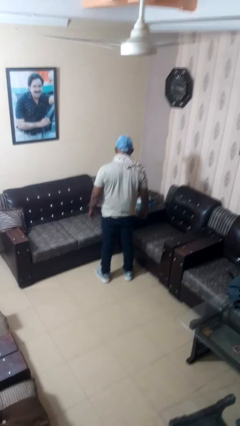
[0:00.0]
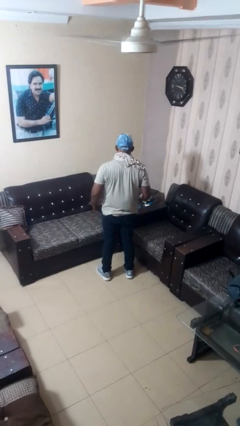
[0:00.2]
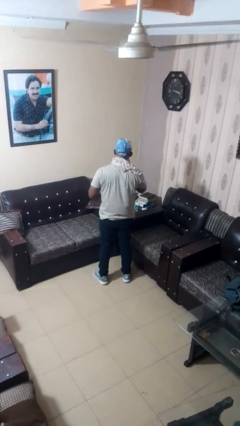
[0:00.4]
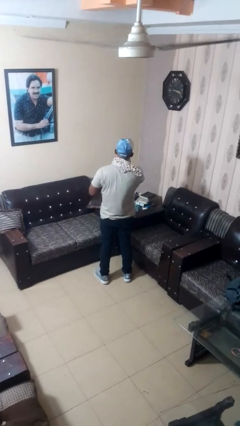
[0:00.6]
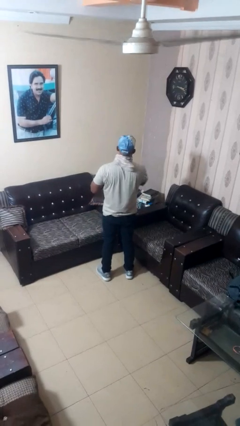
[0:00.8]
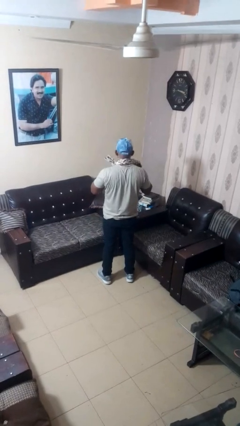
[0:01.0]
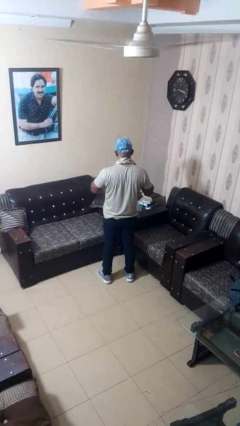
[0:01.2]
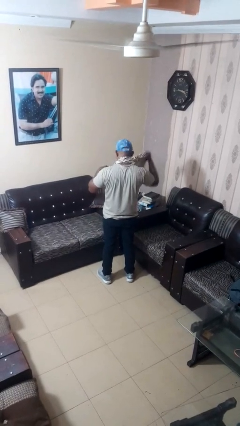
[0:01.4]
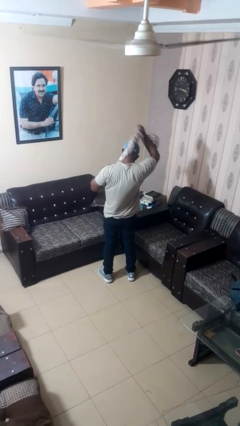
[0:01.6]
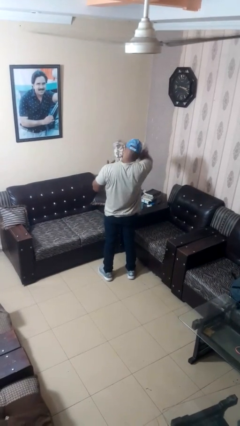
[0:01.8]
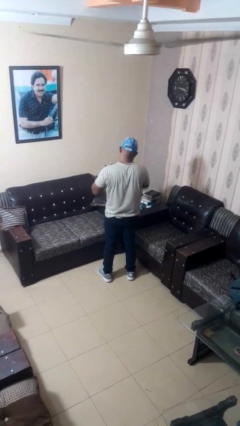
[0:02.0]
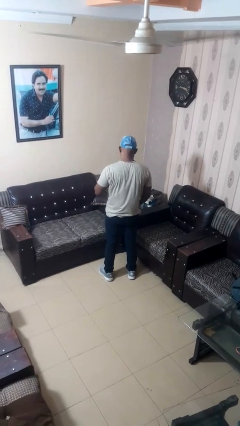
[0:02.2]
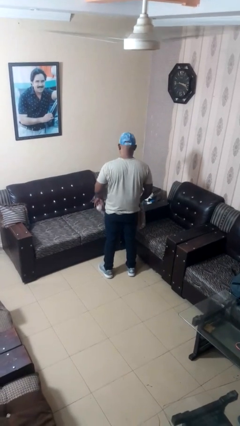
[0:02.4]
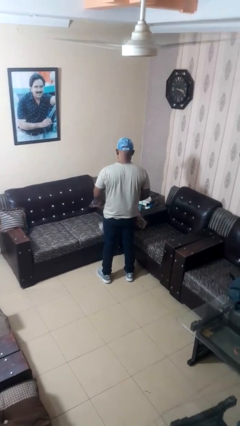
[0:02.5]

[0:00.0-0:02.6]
person takes off scarf

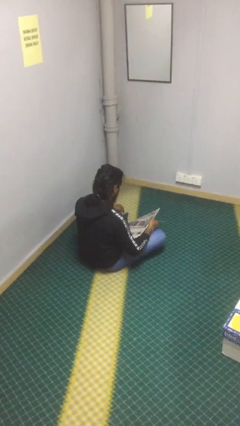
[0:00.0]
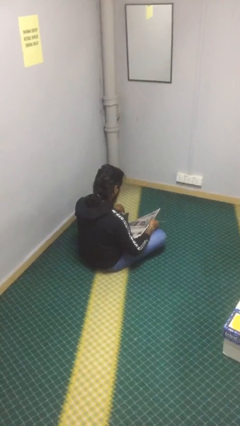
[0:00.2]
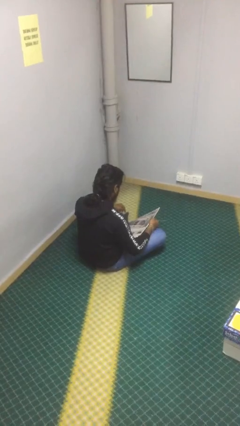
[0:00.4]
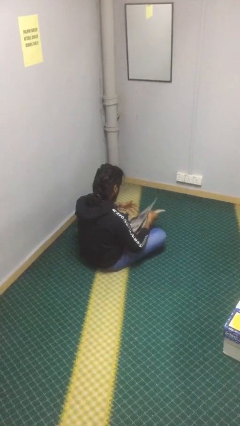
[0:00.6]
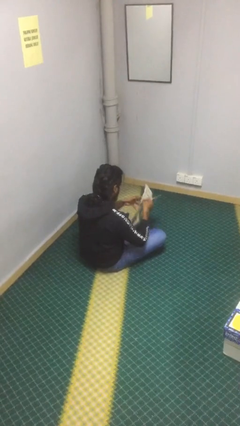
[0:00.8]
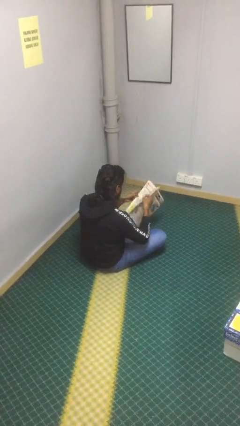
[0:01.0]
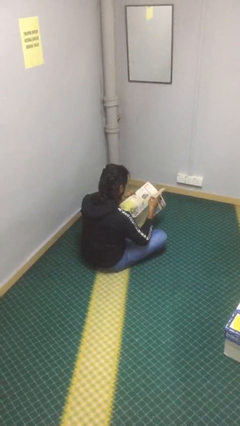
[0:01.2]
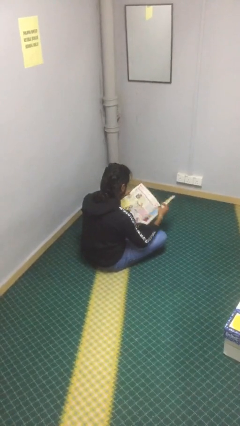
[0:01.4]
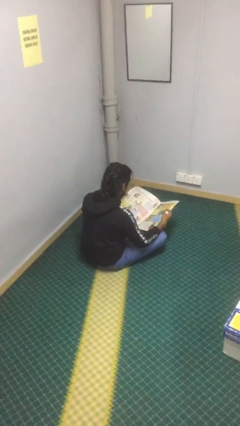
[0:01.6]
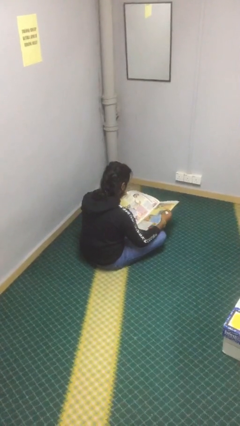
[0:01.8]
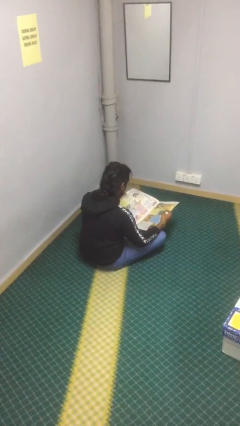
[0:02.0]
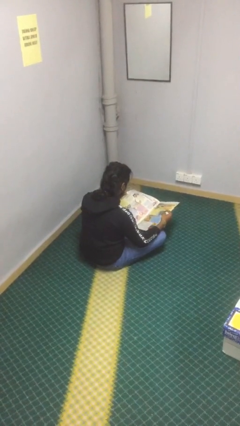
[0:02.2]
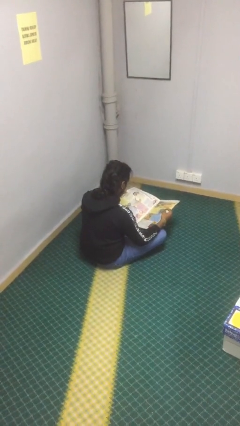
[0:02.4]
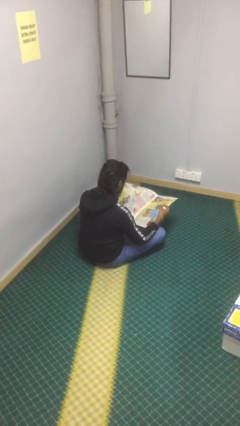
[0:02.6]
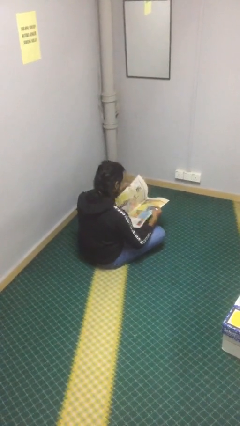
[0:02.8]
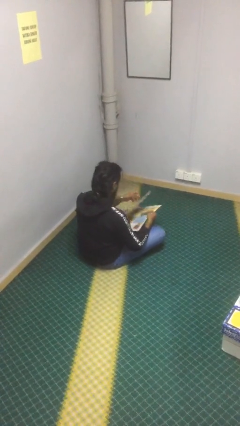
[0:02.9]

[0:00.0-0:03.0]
person reads newspaper

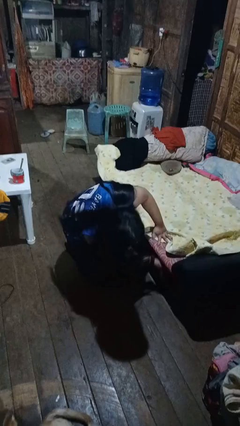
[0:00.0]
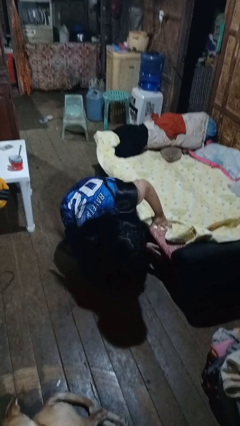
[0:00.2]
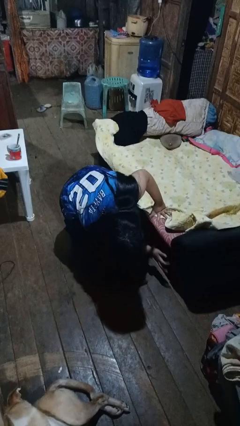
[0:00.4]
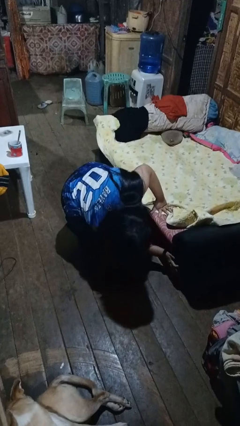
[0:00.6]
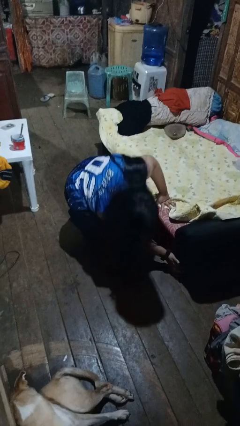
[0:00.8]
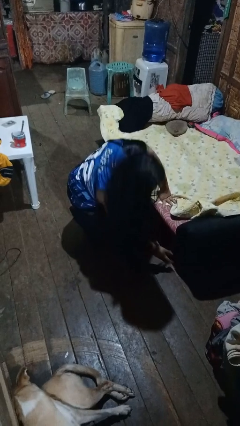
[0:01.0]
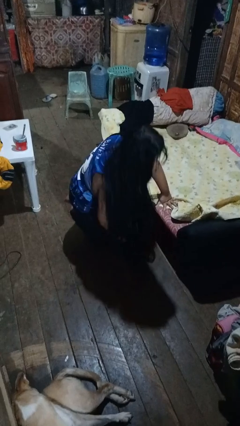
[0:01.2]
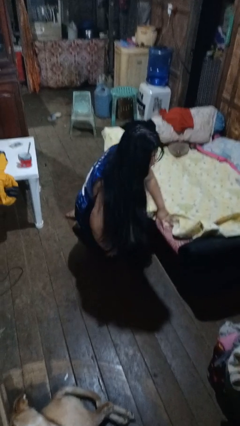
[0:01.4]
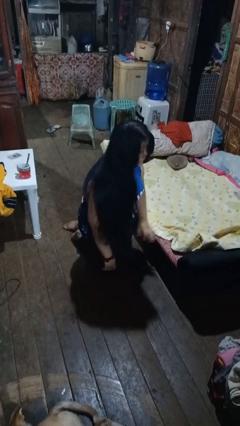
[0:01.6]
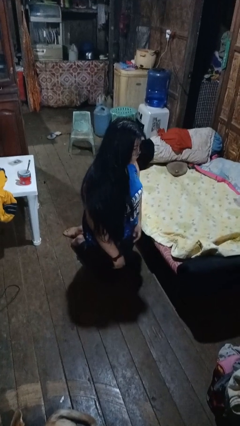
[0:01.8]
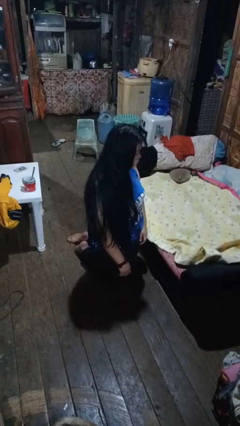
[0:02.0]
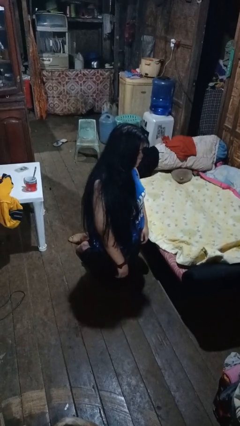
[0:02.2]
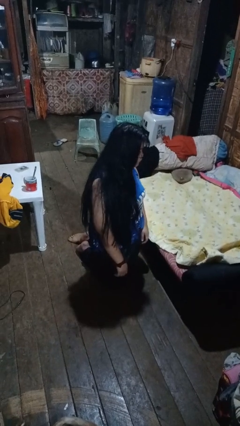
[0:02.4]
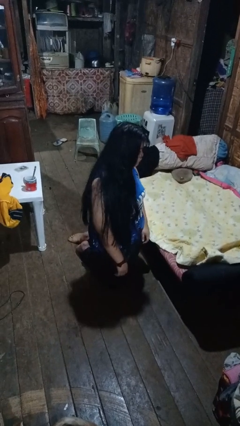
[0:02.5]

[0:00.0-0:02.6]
person searches under bed

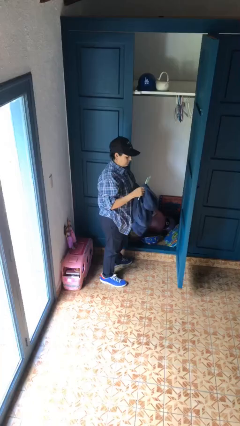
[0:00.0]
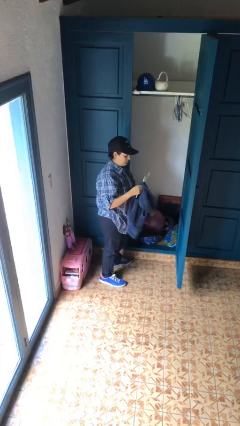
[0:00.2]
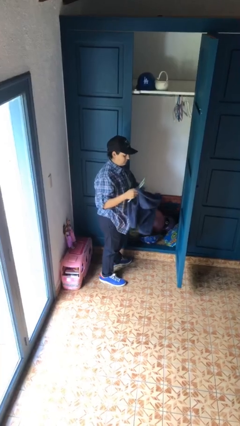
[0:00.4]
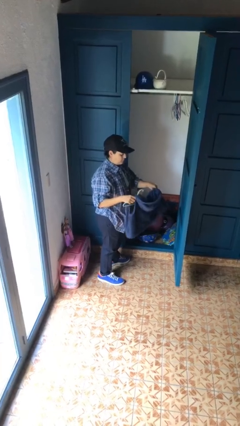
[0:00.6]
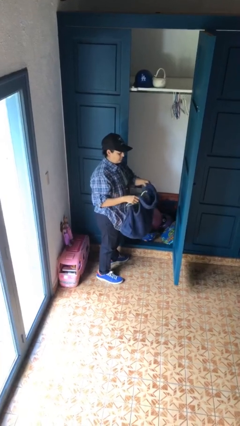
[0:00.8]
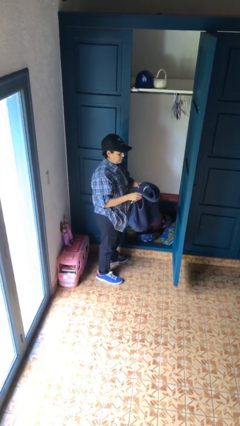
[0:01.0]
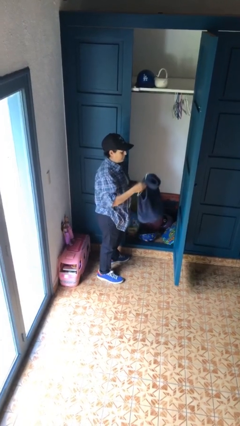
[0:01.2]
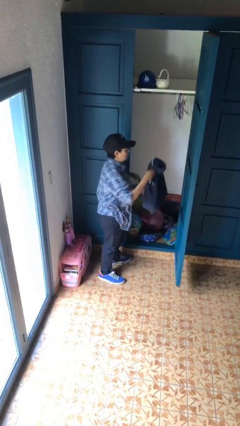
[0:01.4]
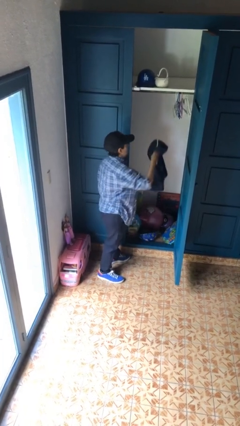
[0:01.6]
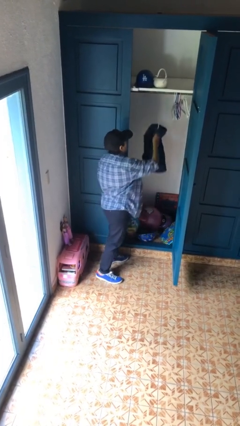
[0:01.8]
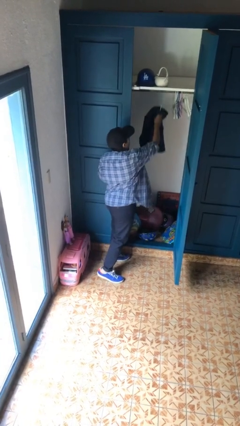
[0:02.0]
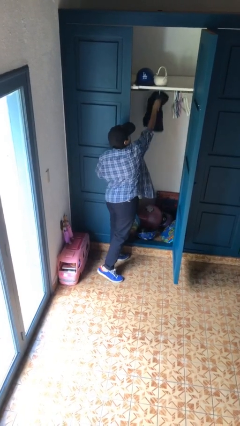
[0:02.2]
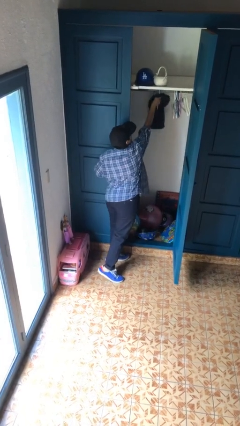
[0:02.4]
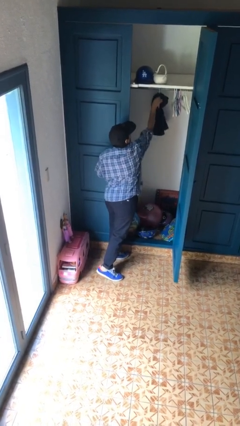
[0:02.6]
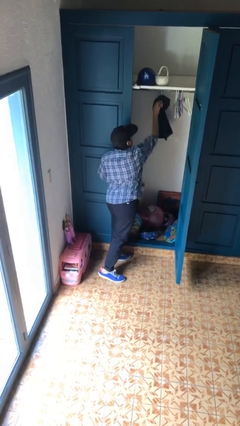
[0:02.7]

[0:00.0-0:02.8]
person puts clothes into closet

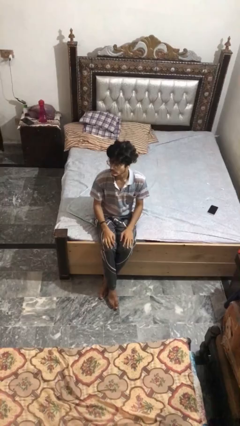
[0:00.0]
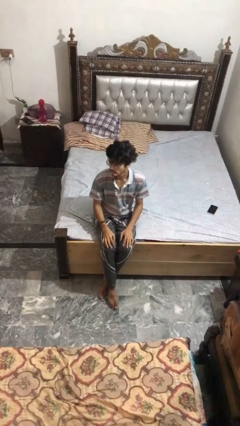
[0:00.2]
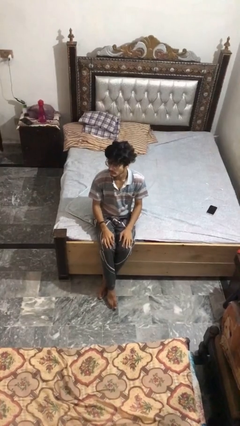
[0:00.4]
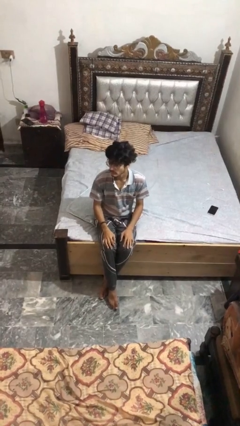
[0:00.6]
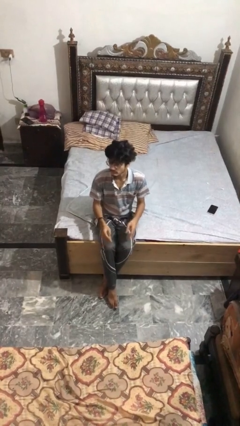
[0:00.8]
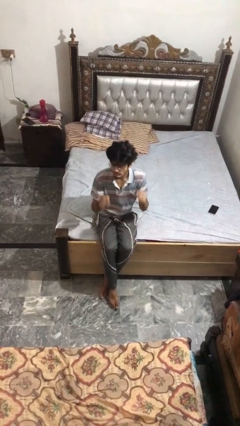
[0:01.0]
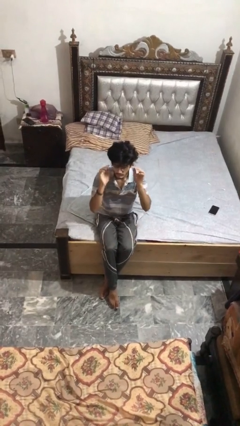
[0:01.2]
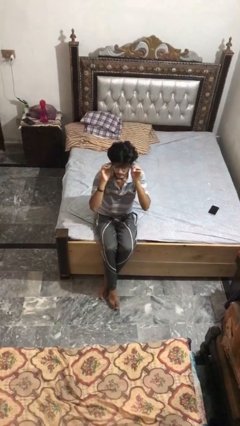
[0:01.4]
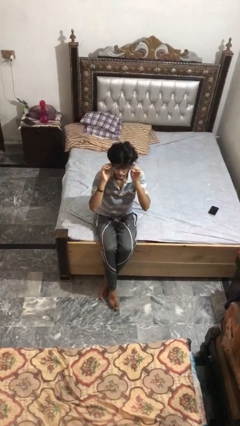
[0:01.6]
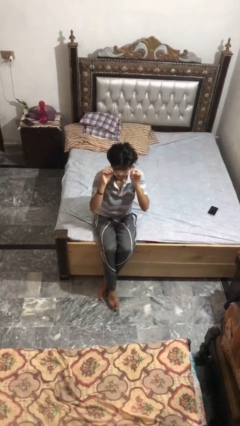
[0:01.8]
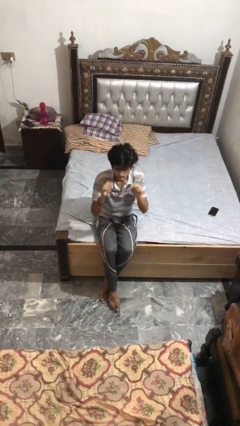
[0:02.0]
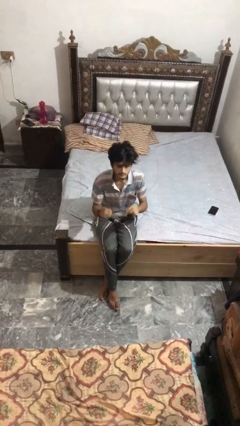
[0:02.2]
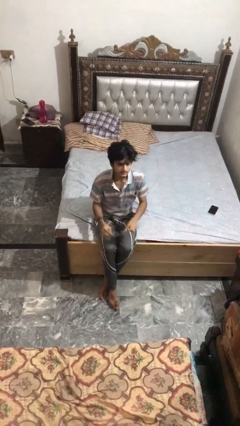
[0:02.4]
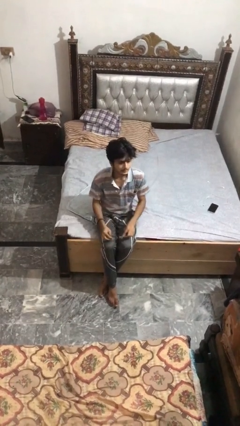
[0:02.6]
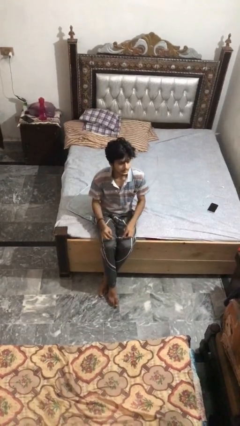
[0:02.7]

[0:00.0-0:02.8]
person takes off glasses

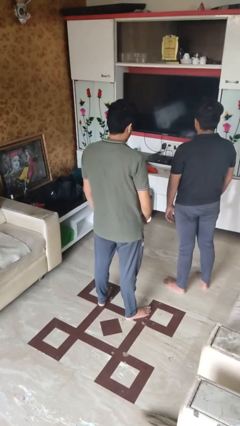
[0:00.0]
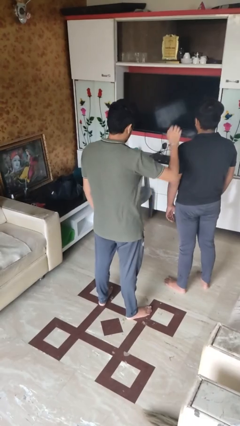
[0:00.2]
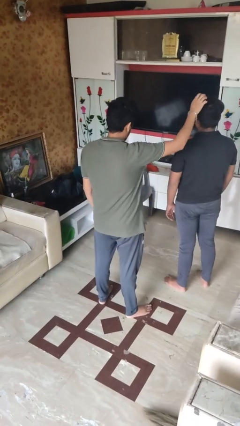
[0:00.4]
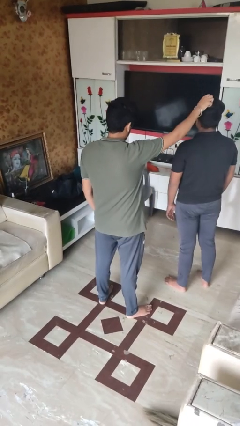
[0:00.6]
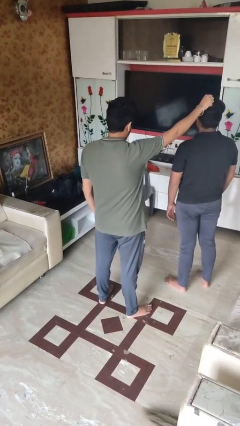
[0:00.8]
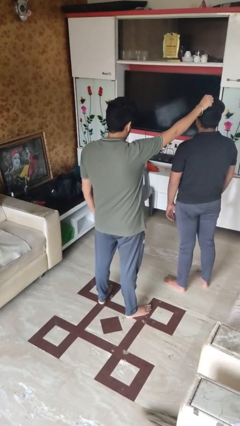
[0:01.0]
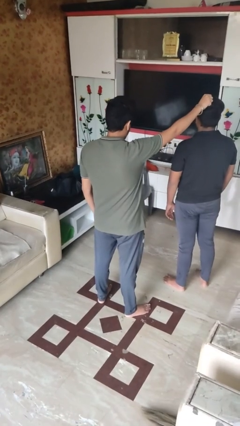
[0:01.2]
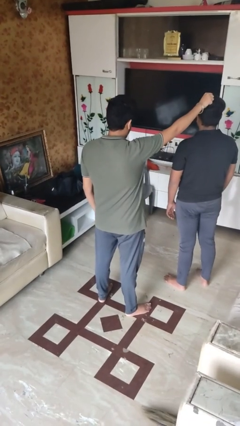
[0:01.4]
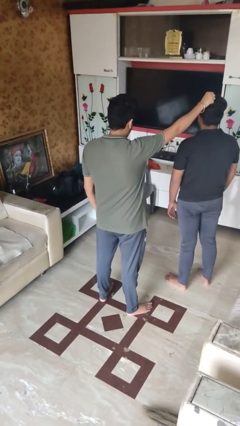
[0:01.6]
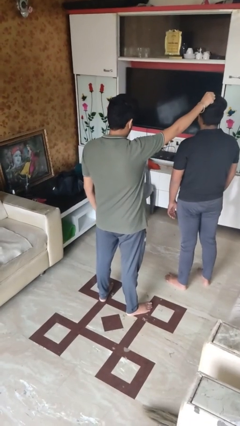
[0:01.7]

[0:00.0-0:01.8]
person grabs person by hair

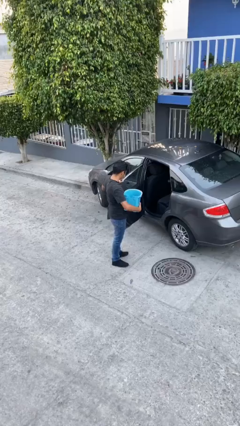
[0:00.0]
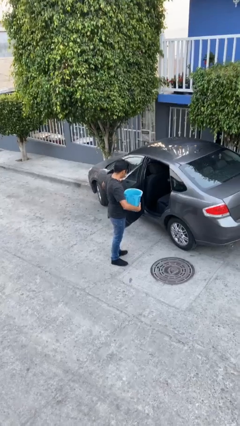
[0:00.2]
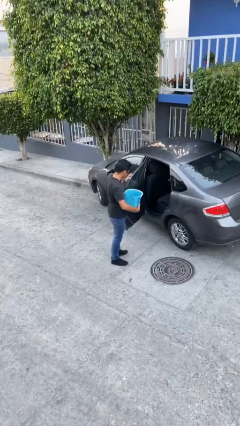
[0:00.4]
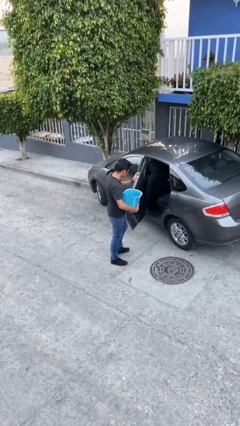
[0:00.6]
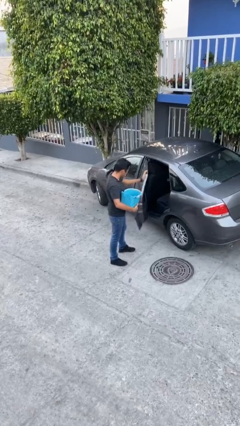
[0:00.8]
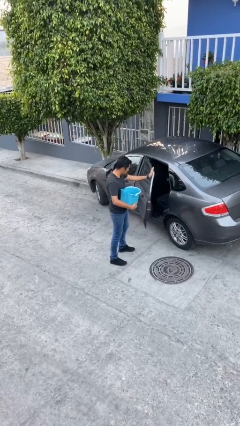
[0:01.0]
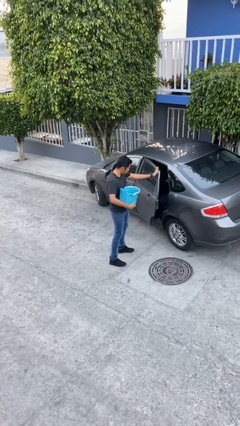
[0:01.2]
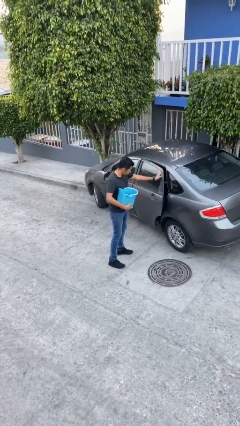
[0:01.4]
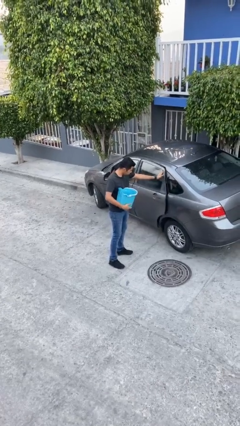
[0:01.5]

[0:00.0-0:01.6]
person closes car door
